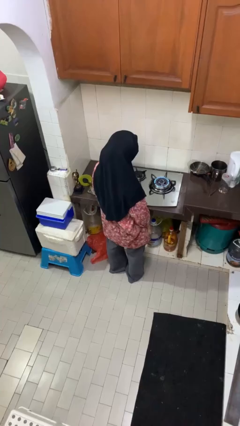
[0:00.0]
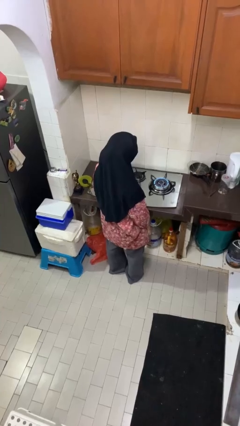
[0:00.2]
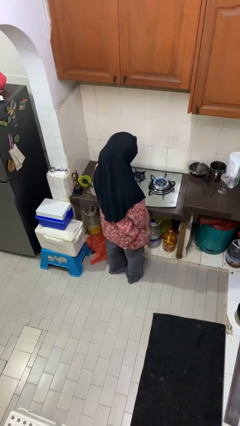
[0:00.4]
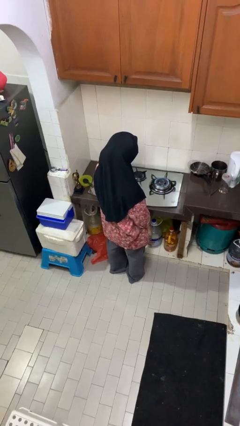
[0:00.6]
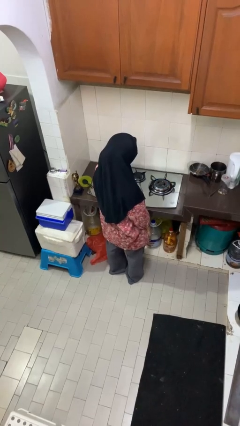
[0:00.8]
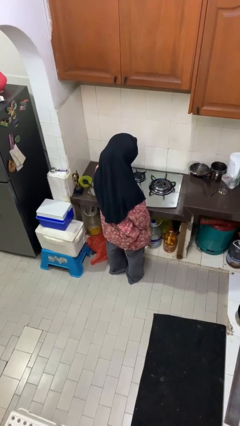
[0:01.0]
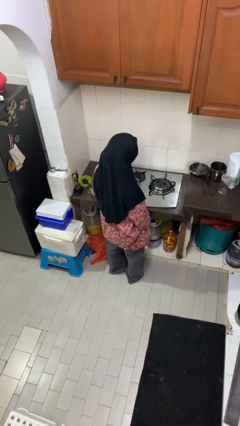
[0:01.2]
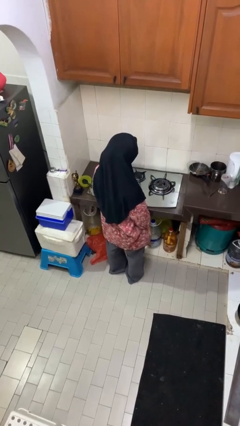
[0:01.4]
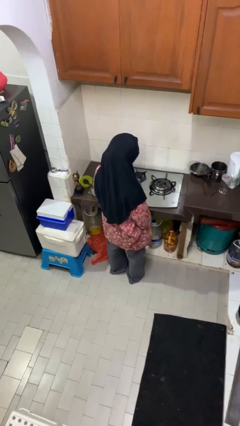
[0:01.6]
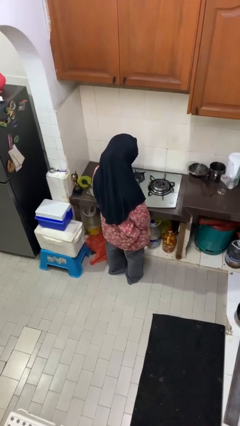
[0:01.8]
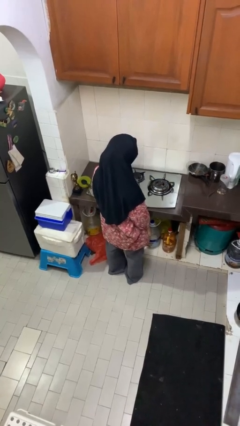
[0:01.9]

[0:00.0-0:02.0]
person turns off stovetop

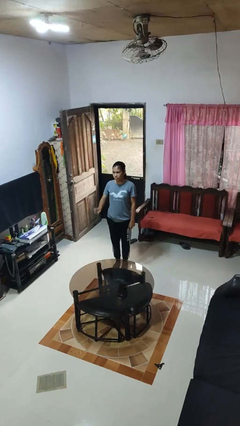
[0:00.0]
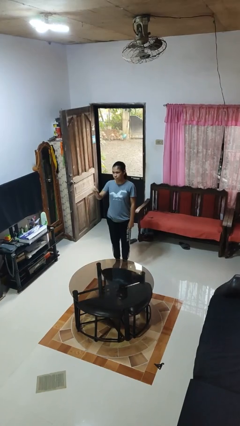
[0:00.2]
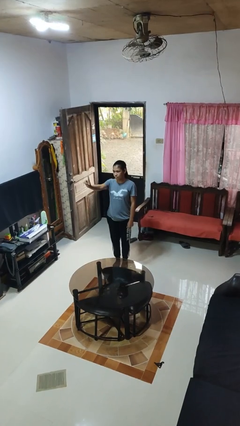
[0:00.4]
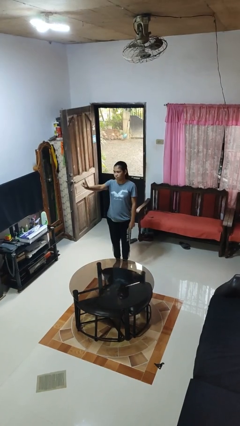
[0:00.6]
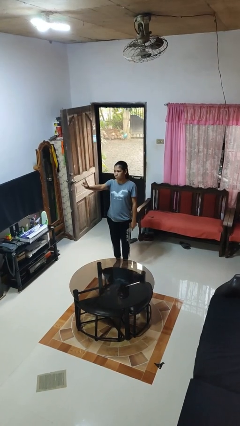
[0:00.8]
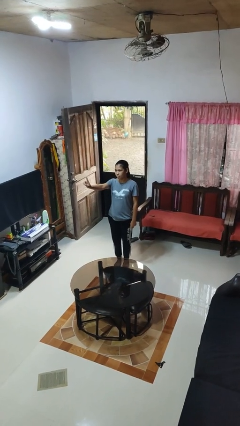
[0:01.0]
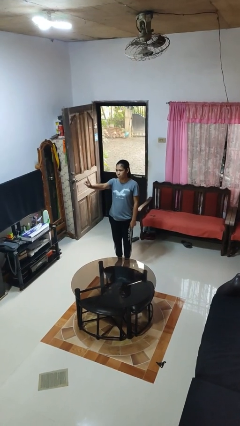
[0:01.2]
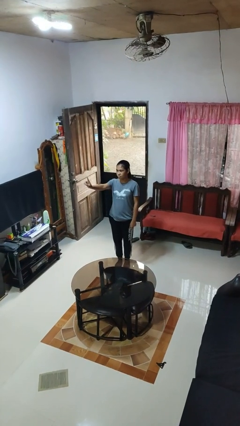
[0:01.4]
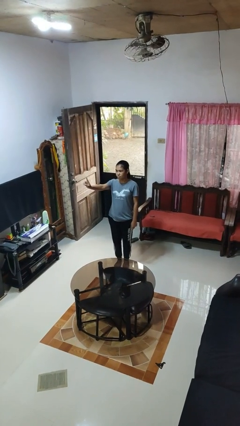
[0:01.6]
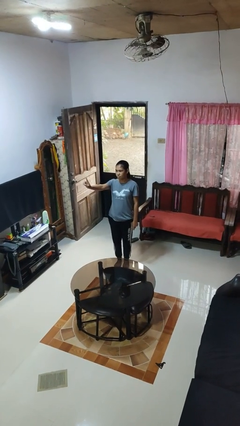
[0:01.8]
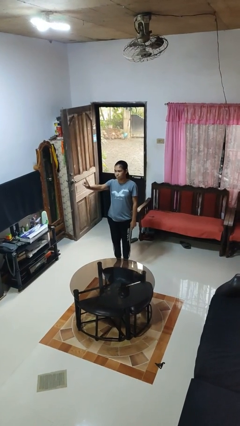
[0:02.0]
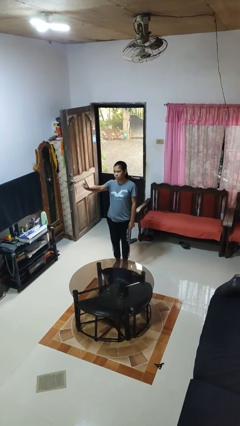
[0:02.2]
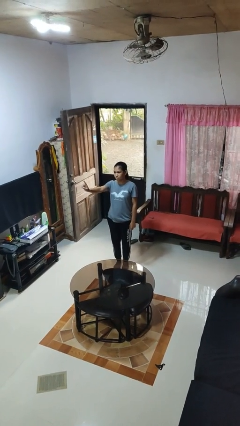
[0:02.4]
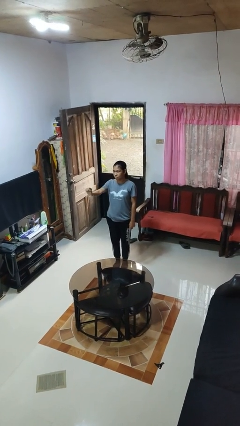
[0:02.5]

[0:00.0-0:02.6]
person gestures number one

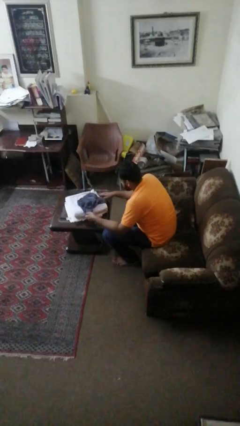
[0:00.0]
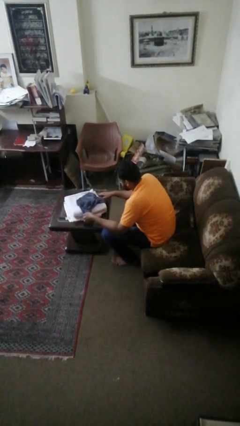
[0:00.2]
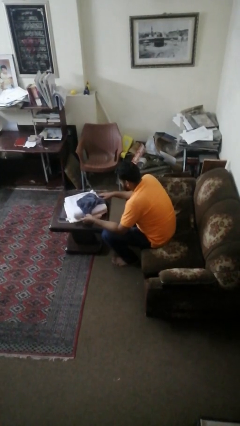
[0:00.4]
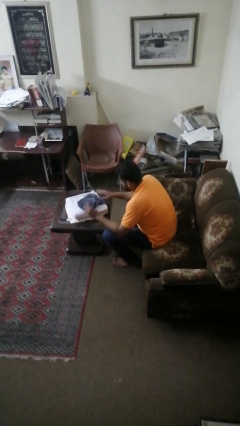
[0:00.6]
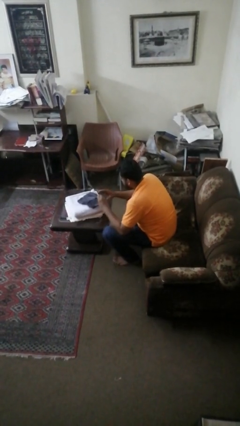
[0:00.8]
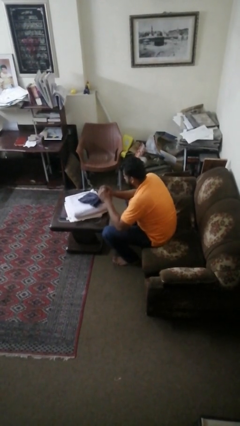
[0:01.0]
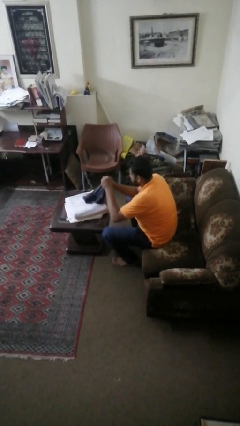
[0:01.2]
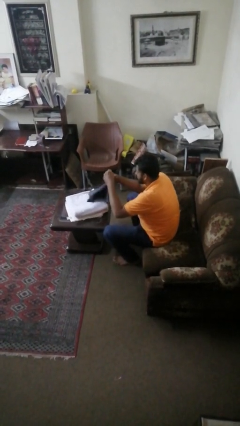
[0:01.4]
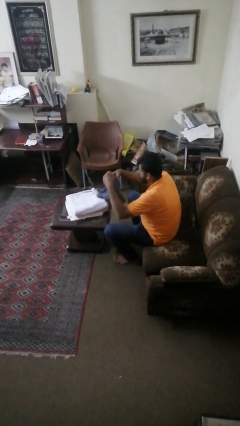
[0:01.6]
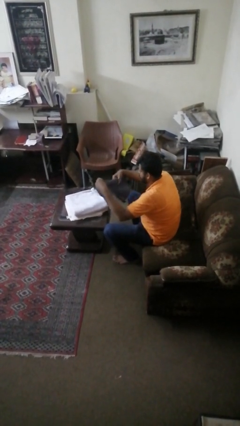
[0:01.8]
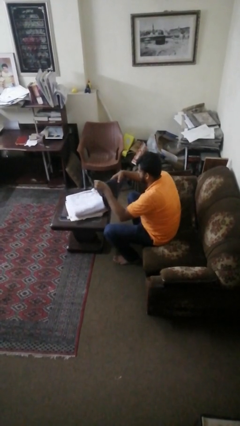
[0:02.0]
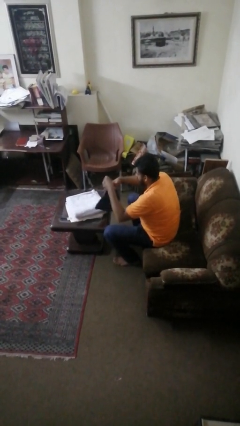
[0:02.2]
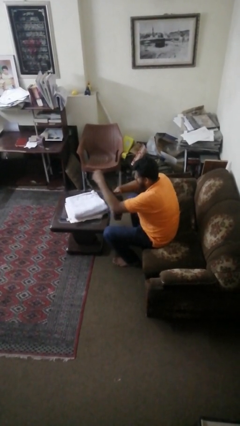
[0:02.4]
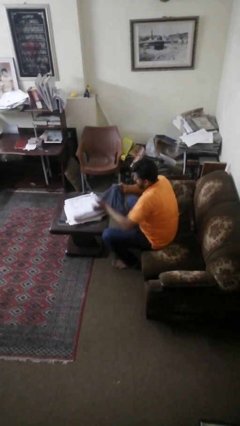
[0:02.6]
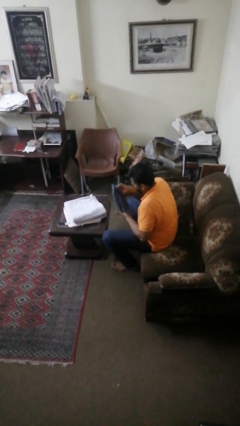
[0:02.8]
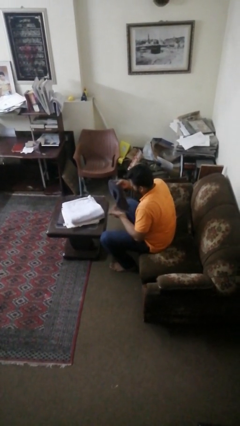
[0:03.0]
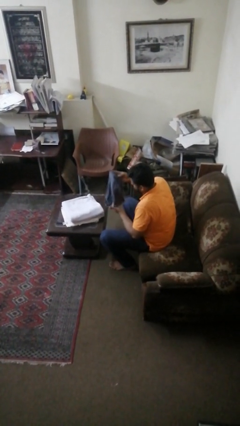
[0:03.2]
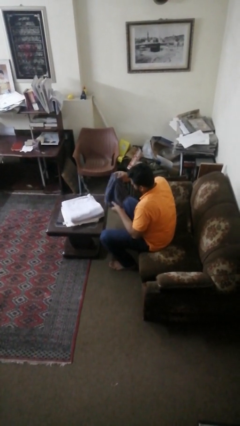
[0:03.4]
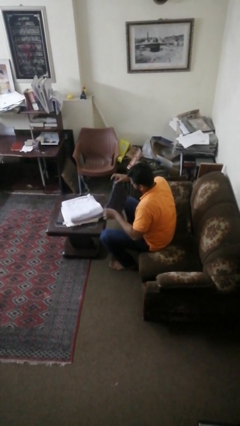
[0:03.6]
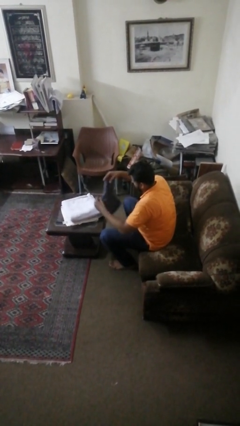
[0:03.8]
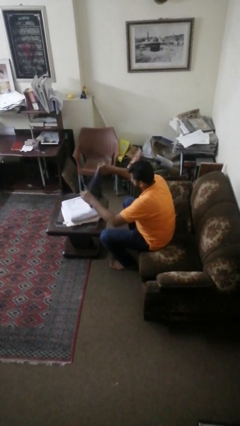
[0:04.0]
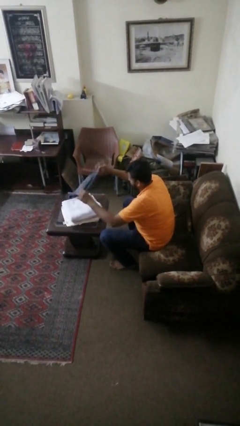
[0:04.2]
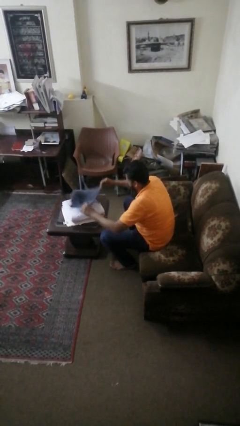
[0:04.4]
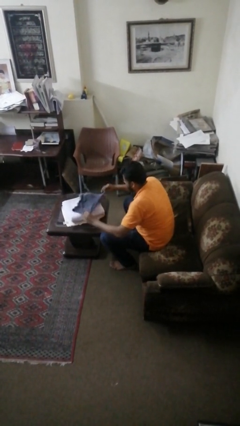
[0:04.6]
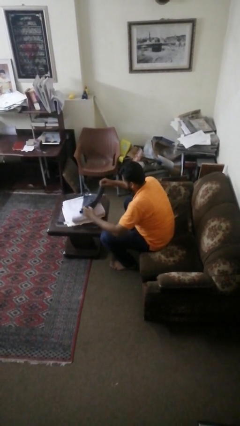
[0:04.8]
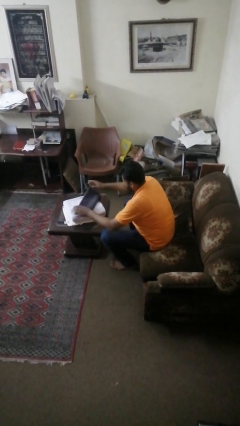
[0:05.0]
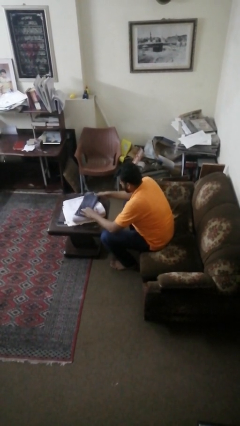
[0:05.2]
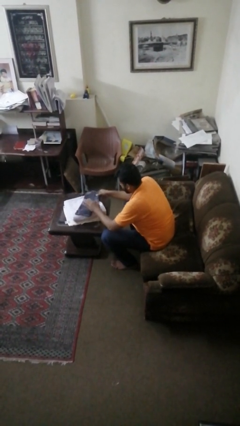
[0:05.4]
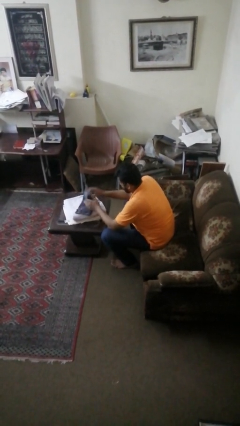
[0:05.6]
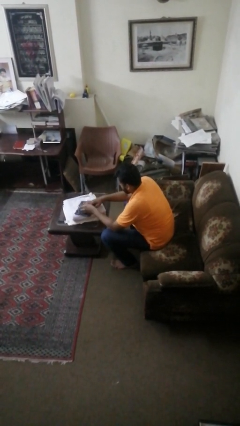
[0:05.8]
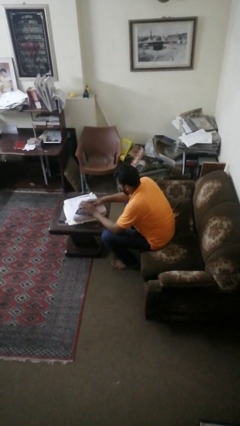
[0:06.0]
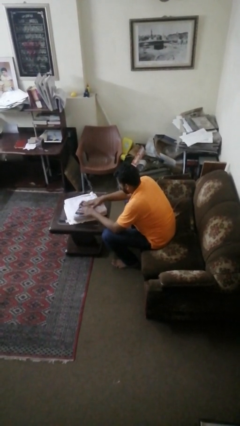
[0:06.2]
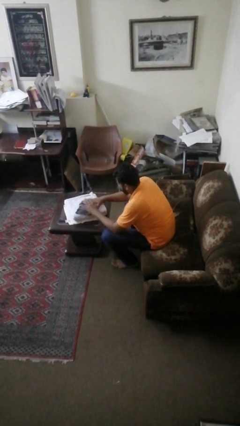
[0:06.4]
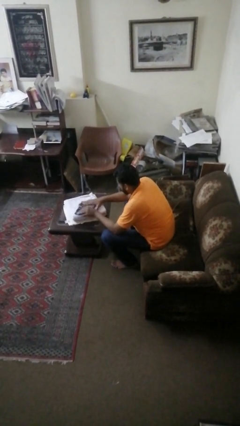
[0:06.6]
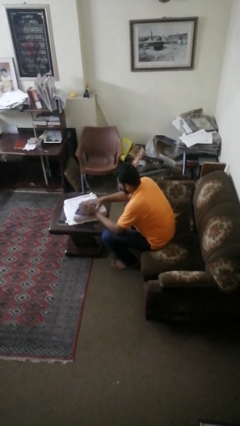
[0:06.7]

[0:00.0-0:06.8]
person folds towel

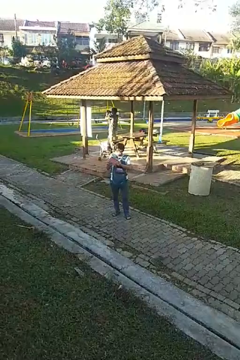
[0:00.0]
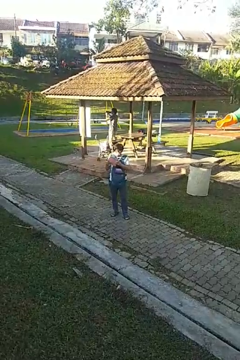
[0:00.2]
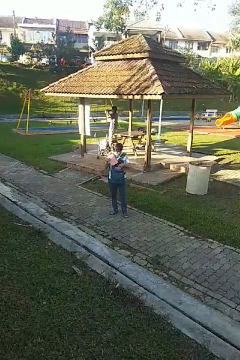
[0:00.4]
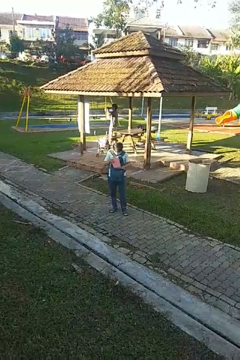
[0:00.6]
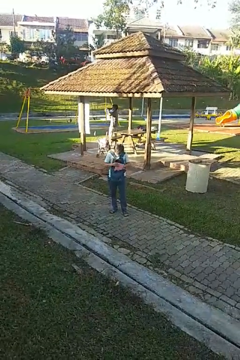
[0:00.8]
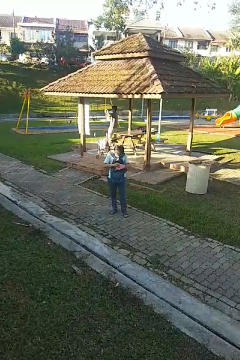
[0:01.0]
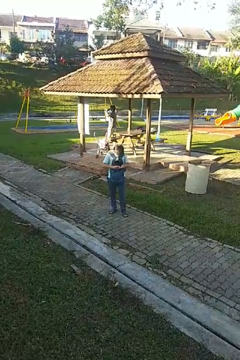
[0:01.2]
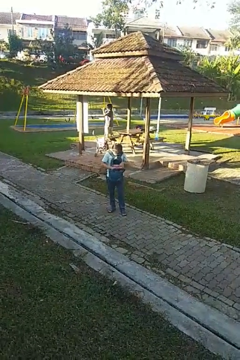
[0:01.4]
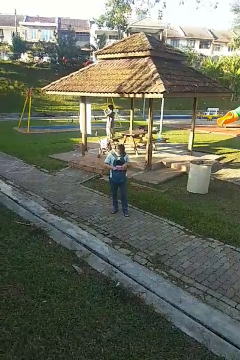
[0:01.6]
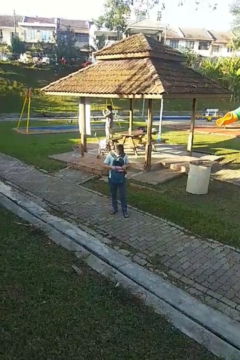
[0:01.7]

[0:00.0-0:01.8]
person puts object into backpack

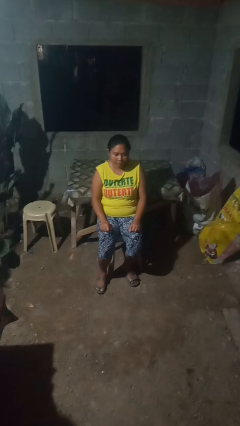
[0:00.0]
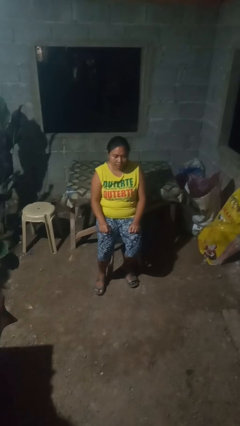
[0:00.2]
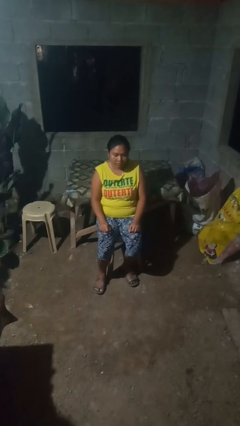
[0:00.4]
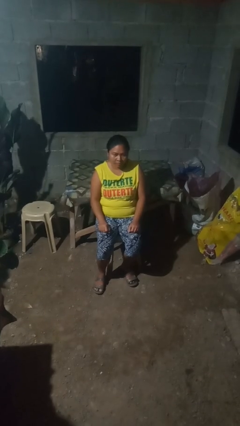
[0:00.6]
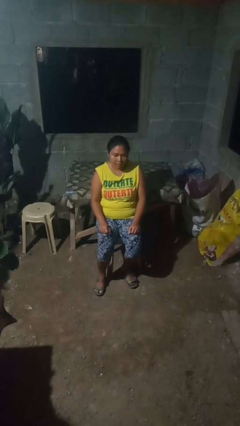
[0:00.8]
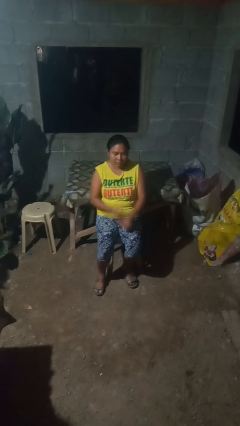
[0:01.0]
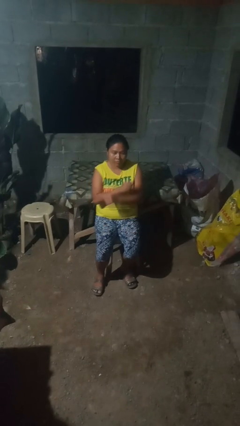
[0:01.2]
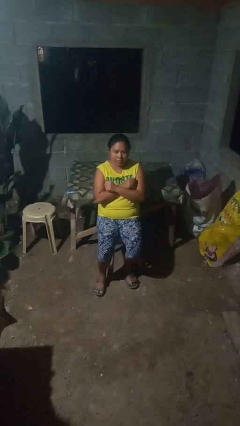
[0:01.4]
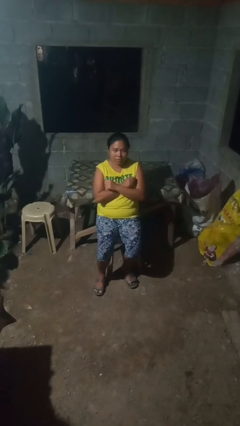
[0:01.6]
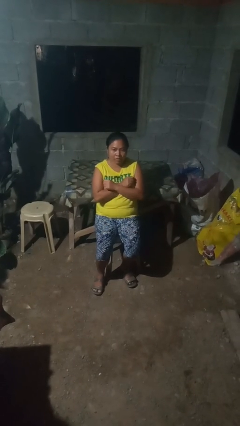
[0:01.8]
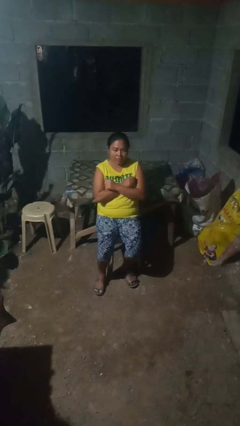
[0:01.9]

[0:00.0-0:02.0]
person crosses arms

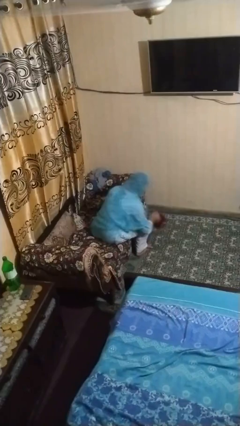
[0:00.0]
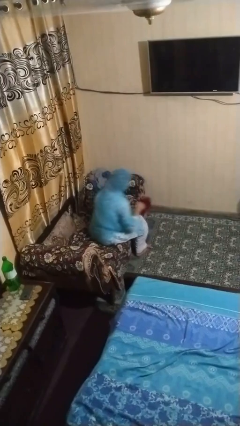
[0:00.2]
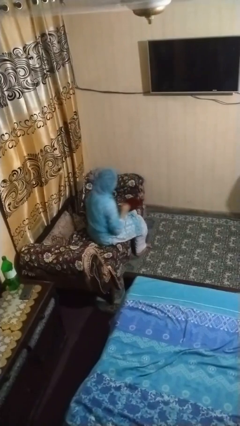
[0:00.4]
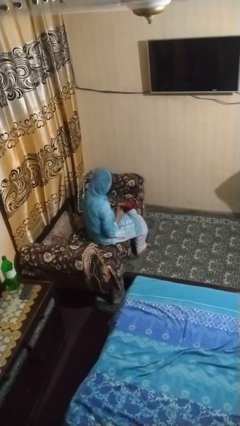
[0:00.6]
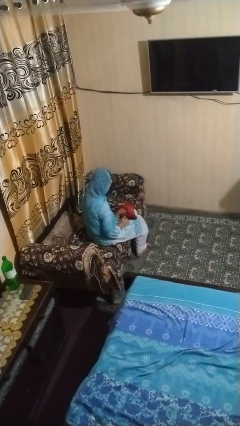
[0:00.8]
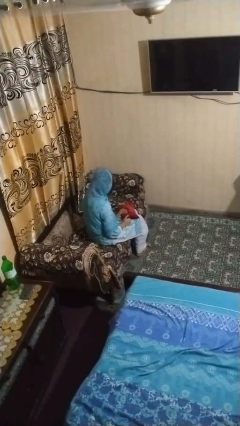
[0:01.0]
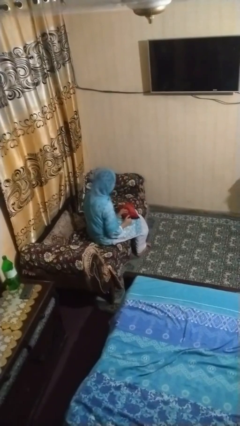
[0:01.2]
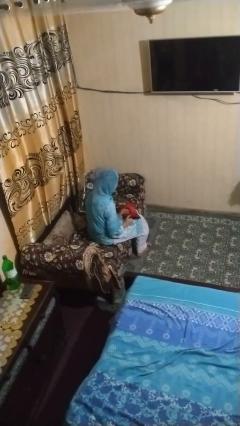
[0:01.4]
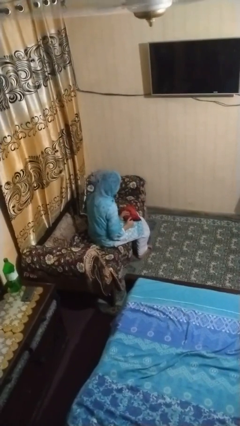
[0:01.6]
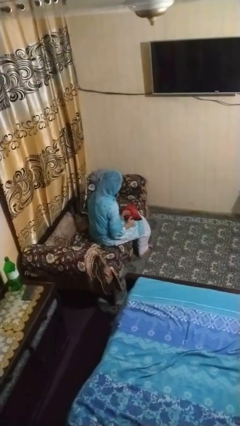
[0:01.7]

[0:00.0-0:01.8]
person picks up object from floor

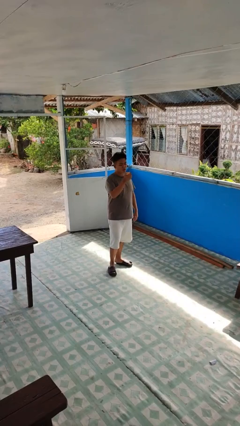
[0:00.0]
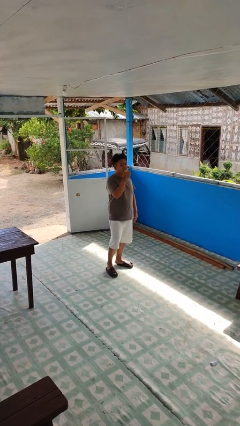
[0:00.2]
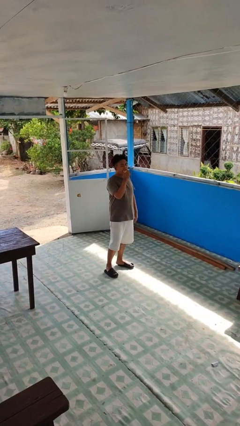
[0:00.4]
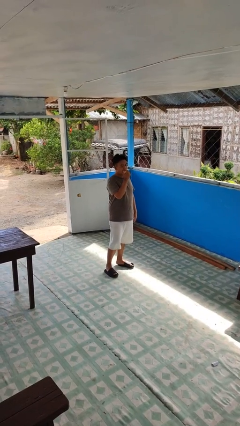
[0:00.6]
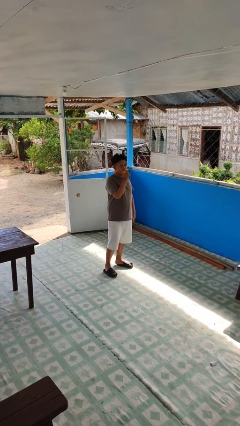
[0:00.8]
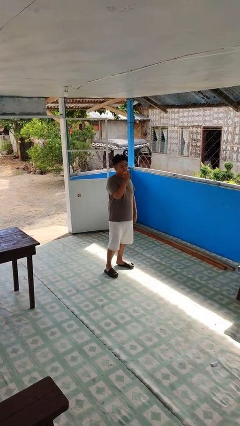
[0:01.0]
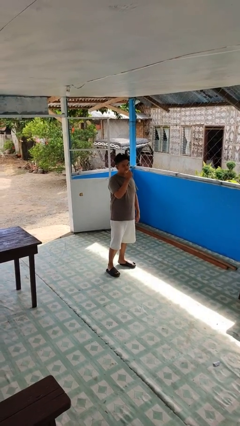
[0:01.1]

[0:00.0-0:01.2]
person eats apple
